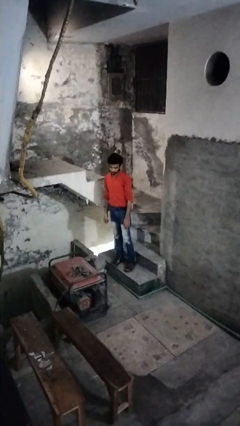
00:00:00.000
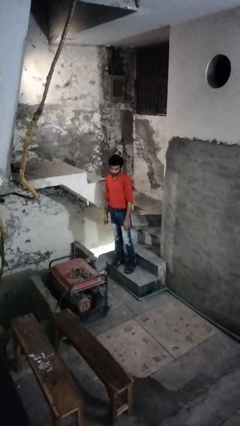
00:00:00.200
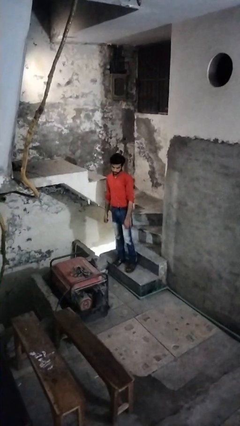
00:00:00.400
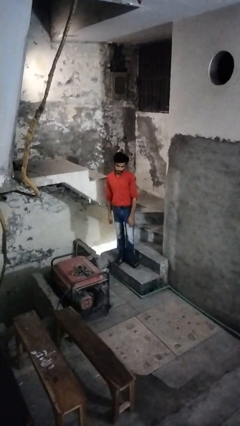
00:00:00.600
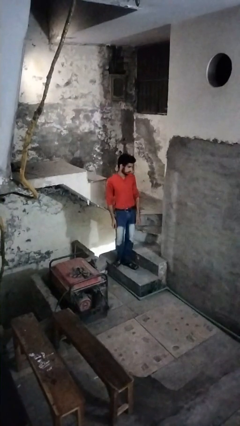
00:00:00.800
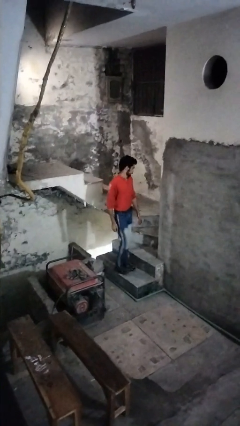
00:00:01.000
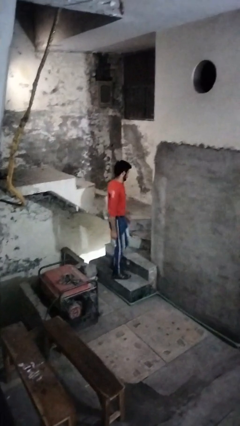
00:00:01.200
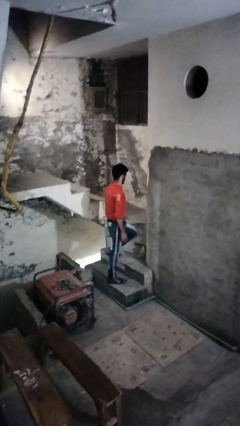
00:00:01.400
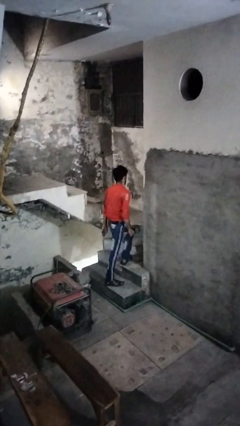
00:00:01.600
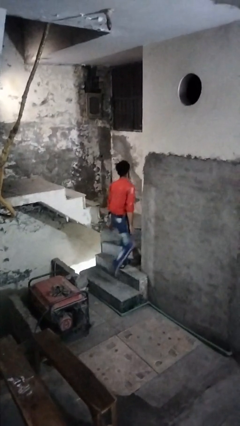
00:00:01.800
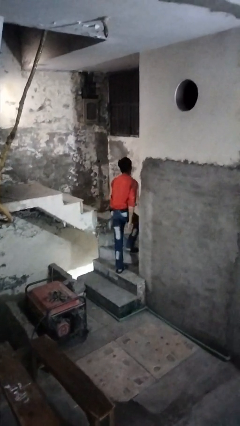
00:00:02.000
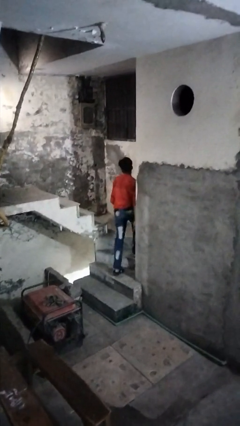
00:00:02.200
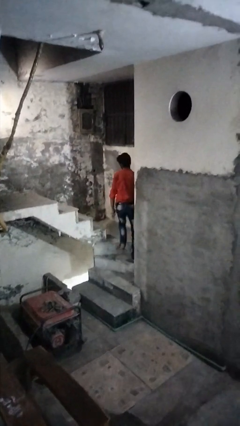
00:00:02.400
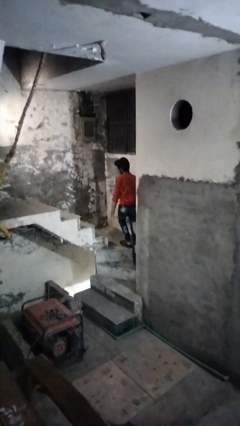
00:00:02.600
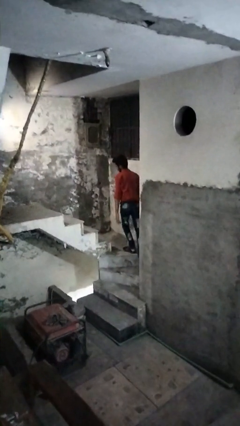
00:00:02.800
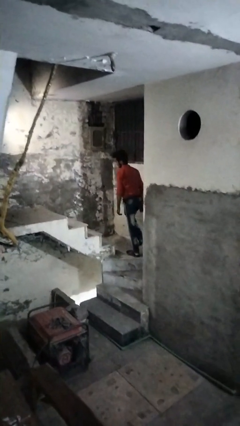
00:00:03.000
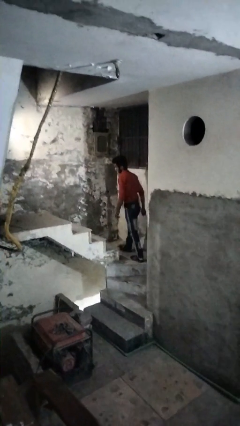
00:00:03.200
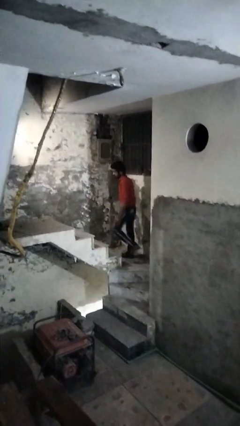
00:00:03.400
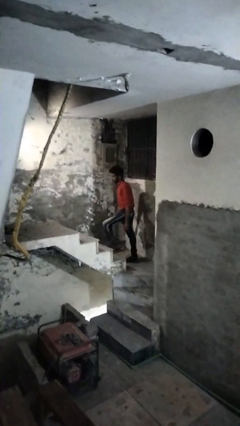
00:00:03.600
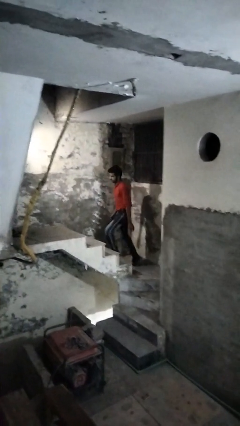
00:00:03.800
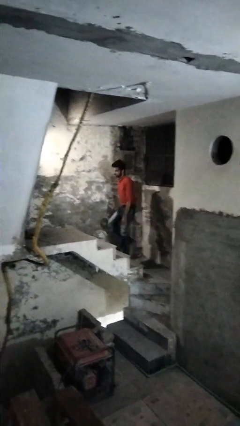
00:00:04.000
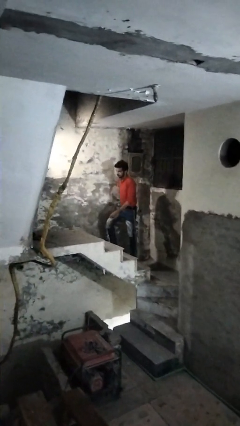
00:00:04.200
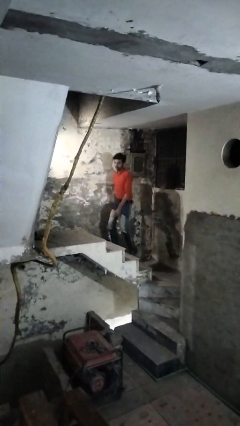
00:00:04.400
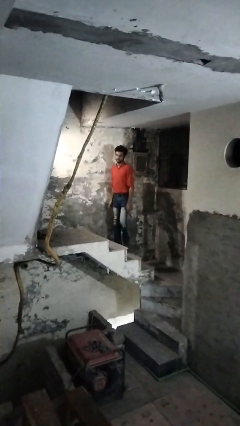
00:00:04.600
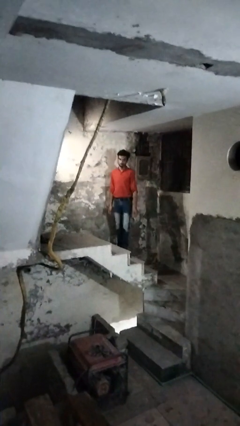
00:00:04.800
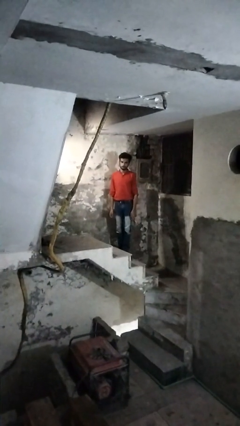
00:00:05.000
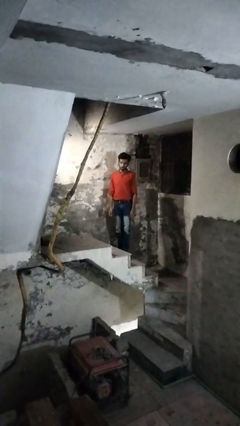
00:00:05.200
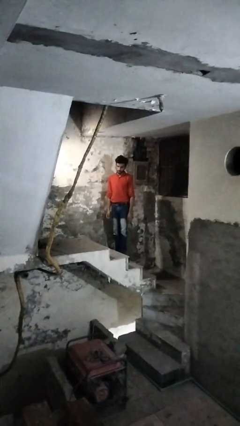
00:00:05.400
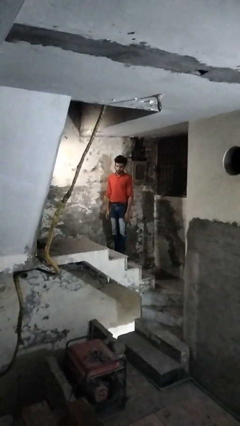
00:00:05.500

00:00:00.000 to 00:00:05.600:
person climbs up stairs

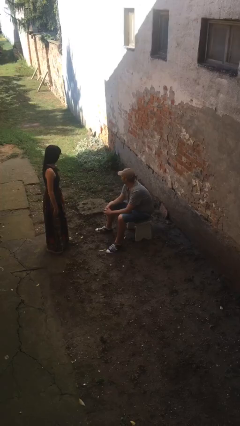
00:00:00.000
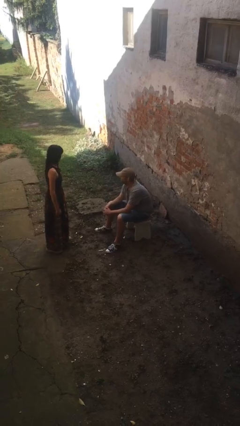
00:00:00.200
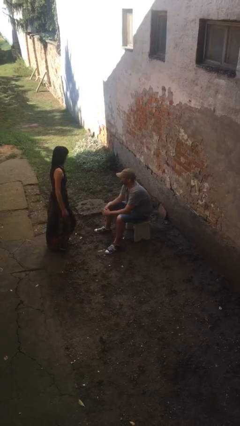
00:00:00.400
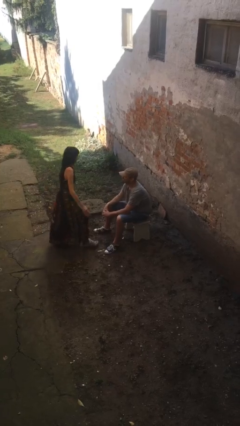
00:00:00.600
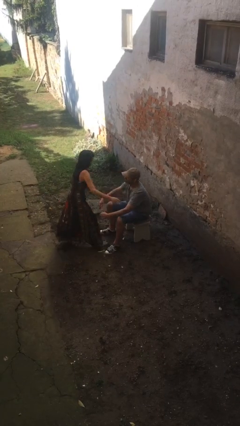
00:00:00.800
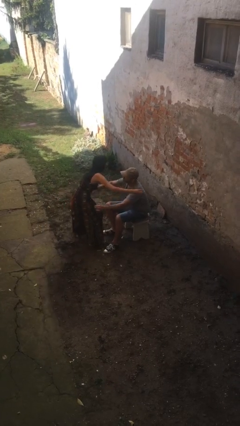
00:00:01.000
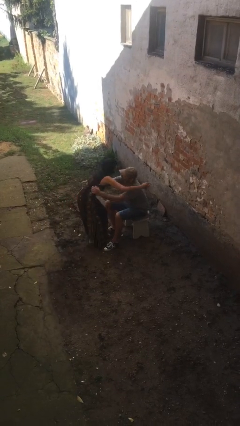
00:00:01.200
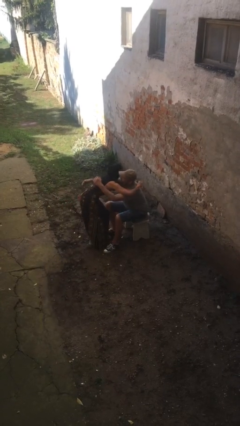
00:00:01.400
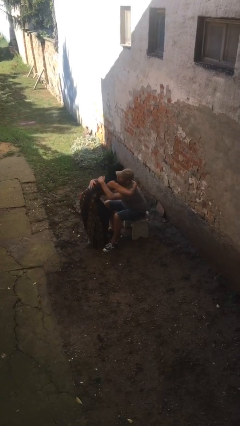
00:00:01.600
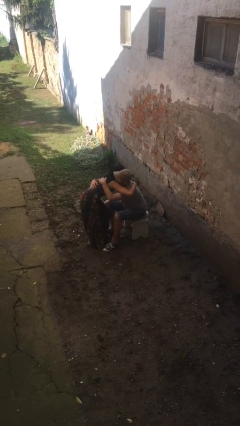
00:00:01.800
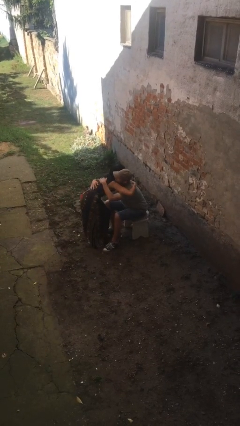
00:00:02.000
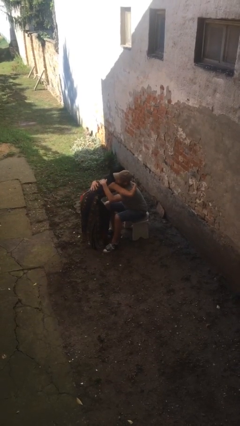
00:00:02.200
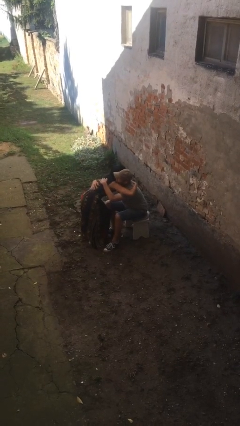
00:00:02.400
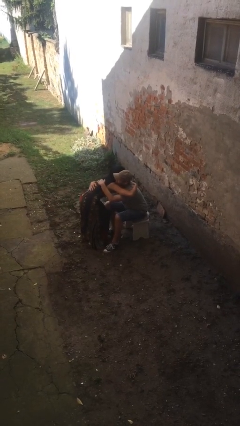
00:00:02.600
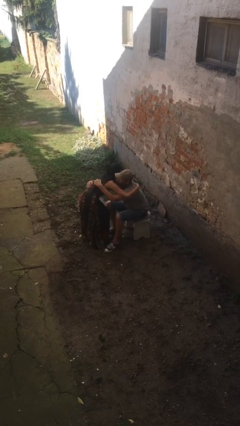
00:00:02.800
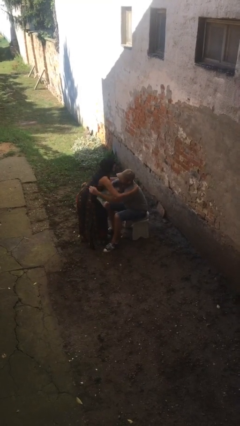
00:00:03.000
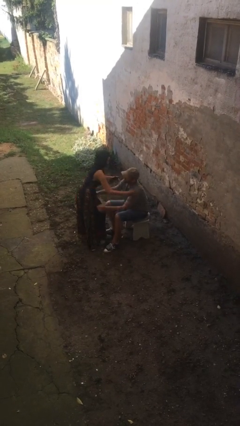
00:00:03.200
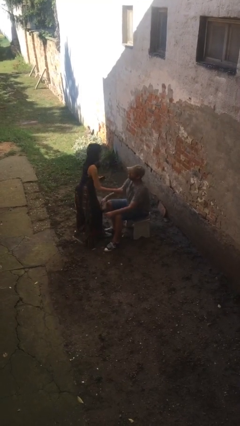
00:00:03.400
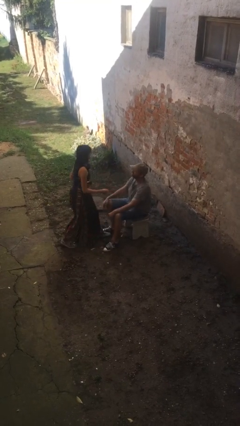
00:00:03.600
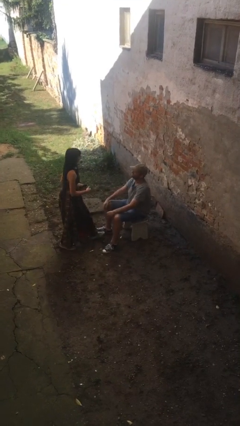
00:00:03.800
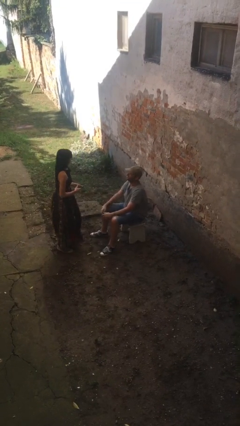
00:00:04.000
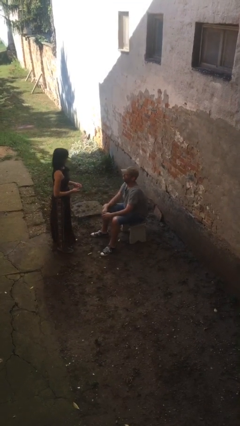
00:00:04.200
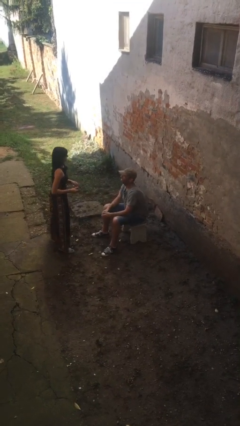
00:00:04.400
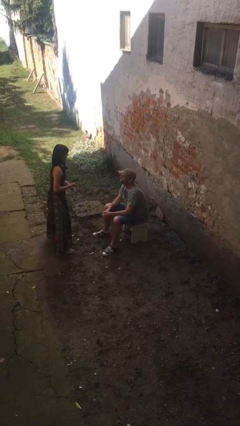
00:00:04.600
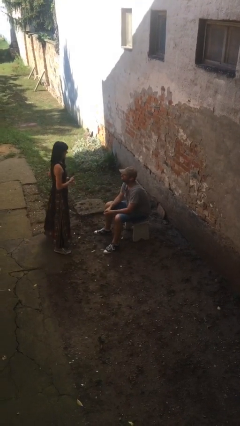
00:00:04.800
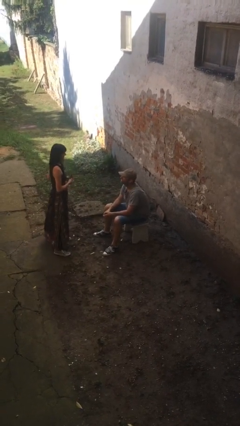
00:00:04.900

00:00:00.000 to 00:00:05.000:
person embraces person

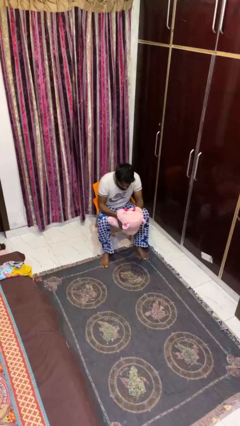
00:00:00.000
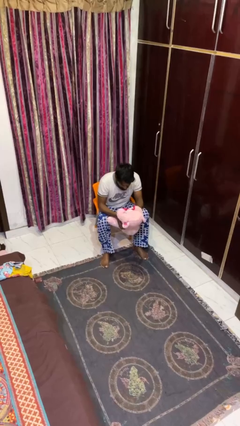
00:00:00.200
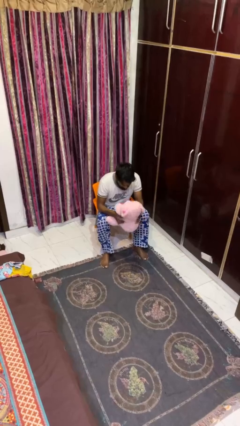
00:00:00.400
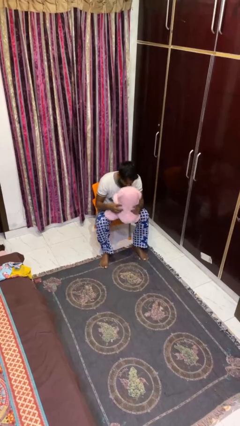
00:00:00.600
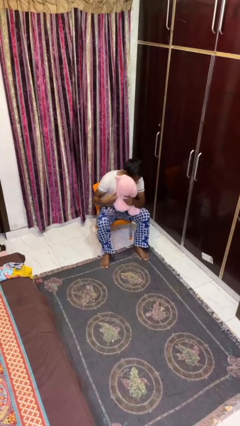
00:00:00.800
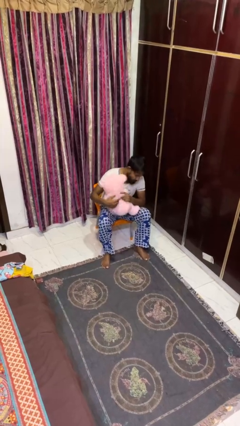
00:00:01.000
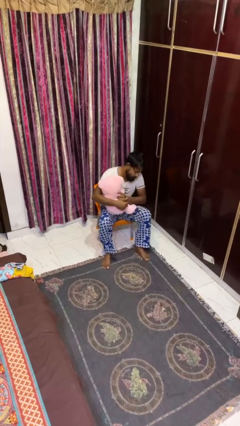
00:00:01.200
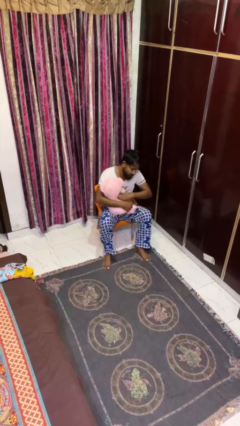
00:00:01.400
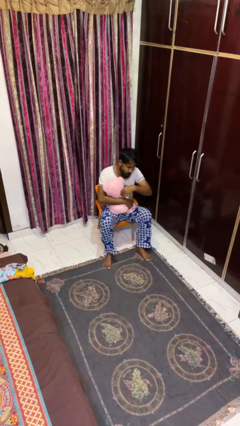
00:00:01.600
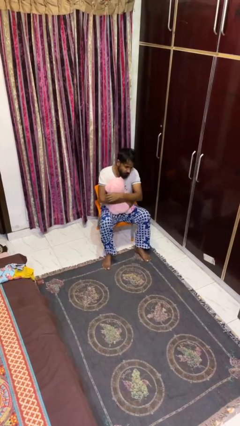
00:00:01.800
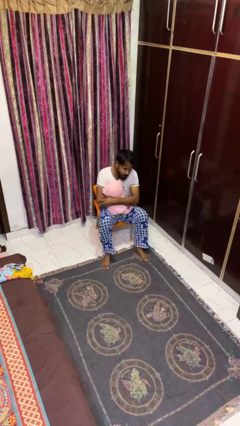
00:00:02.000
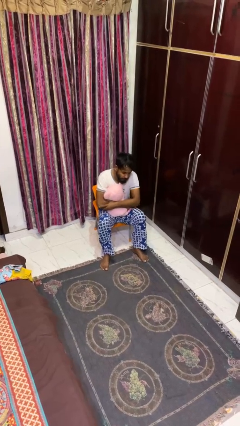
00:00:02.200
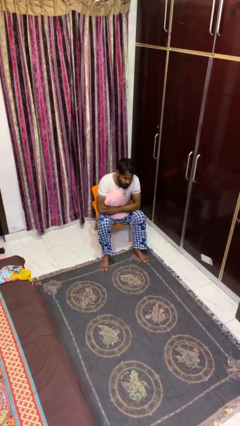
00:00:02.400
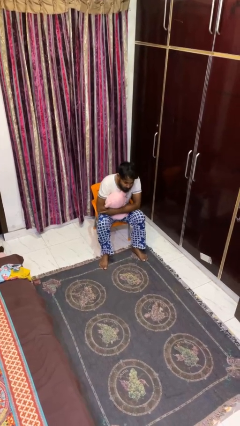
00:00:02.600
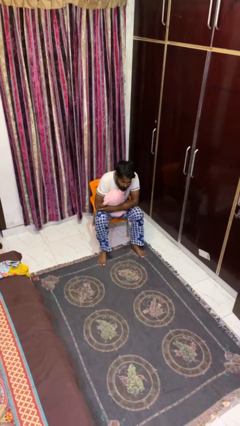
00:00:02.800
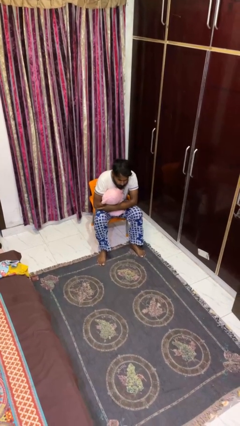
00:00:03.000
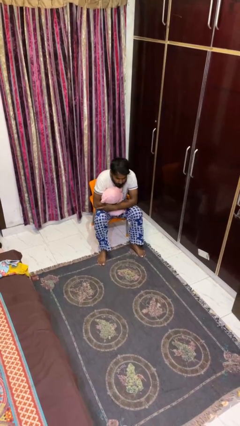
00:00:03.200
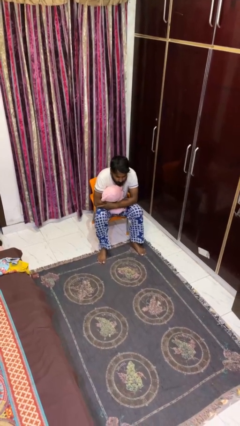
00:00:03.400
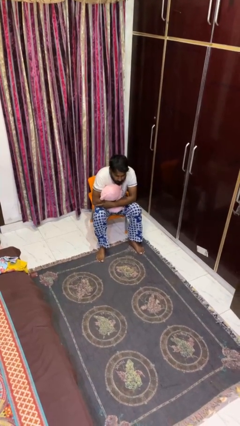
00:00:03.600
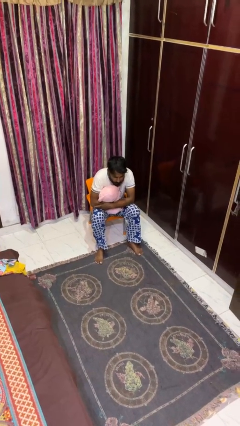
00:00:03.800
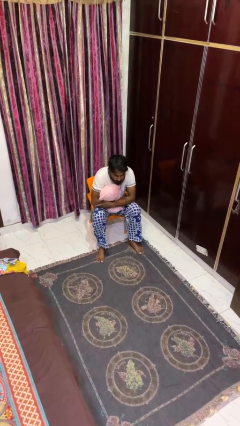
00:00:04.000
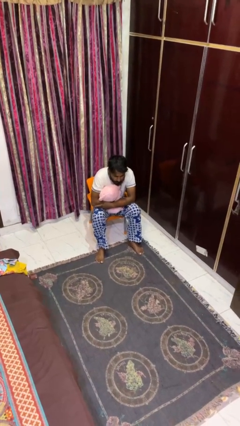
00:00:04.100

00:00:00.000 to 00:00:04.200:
person hugs stuffed animal

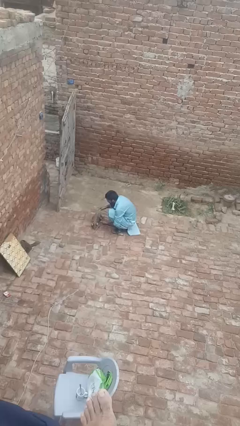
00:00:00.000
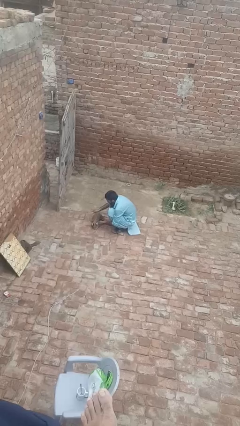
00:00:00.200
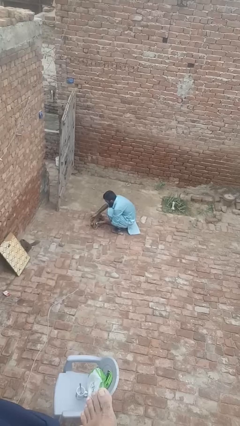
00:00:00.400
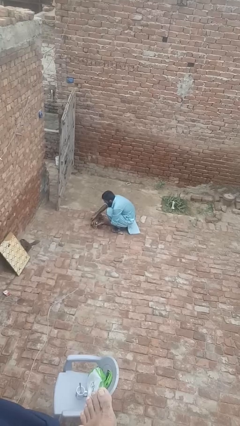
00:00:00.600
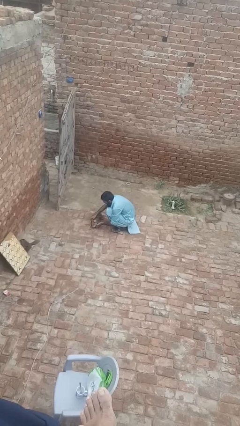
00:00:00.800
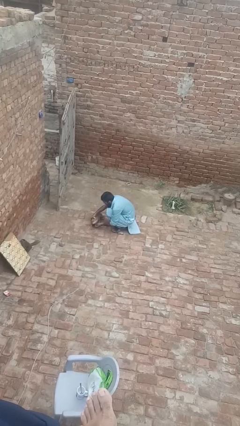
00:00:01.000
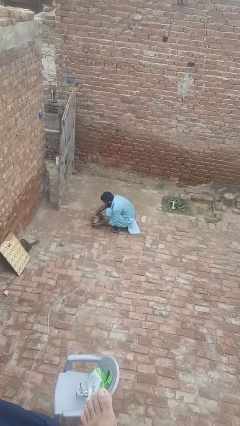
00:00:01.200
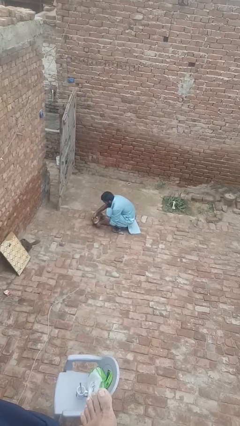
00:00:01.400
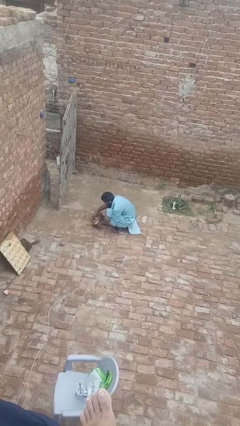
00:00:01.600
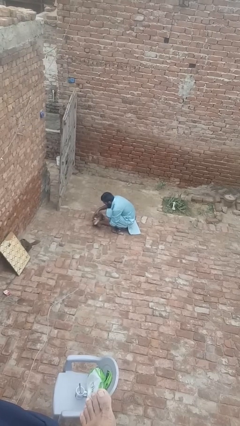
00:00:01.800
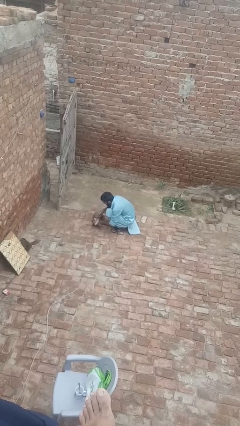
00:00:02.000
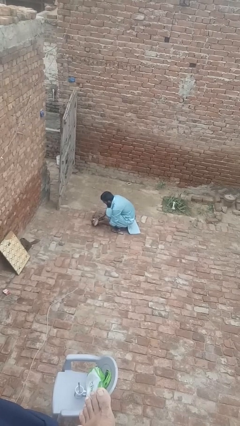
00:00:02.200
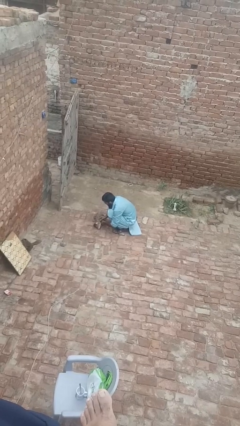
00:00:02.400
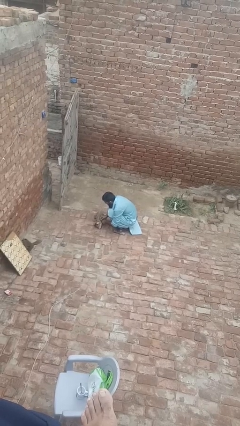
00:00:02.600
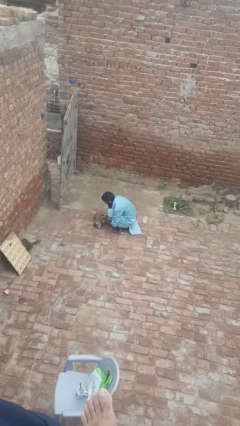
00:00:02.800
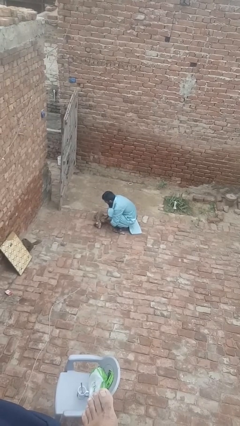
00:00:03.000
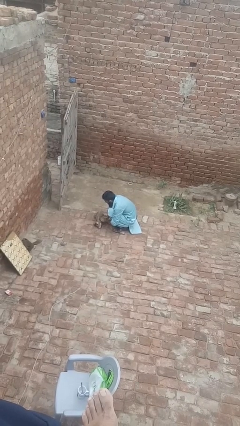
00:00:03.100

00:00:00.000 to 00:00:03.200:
person attaches leash to dog

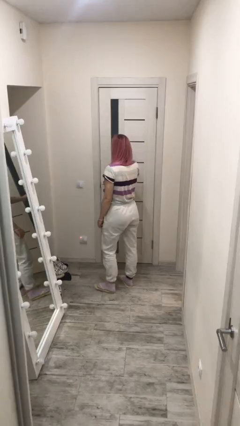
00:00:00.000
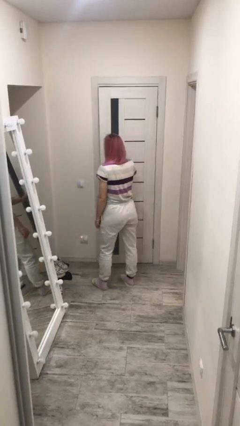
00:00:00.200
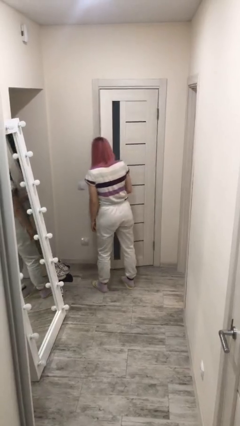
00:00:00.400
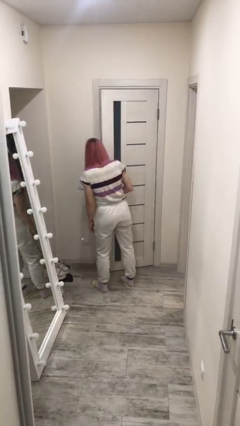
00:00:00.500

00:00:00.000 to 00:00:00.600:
person opens facility door
